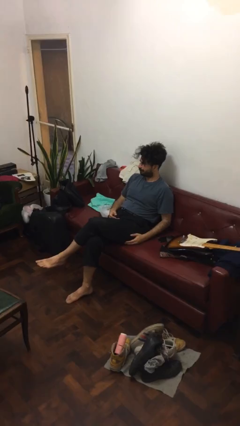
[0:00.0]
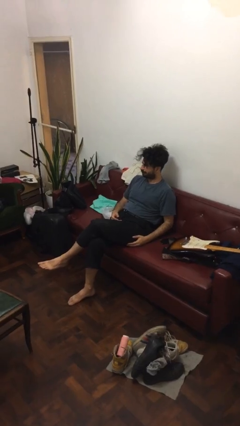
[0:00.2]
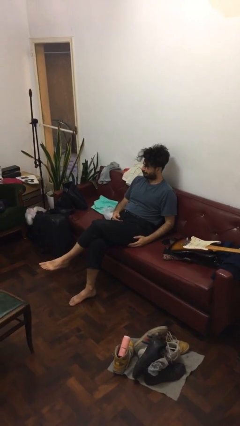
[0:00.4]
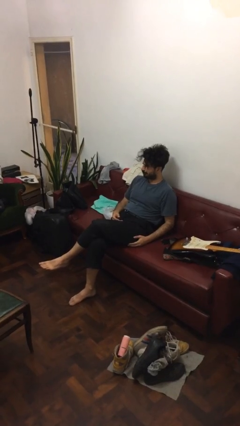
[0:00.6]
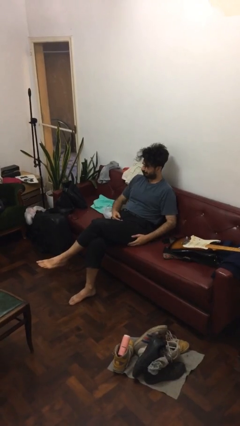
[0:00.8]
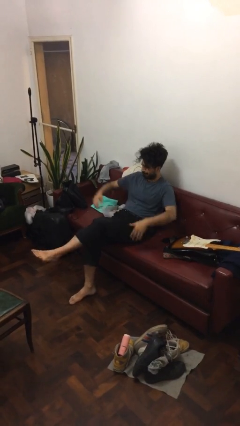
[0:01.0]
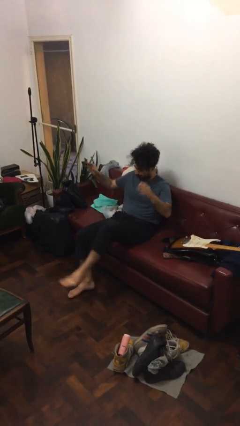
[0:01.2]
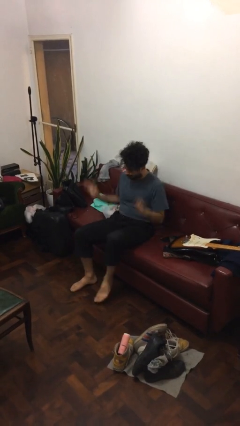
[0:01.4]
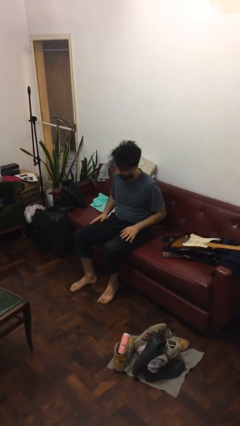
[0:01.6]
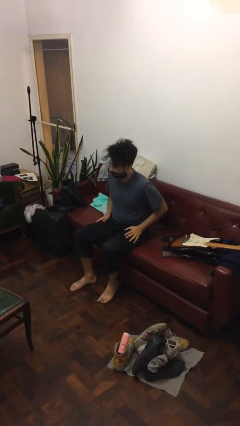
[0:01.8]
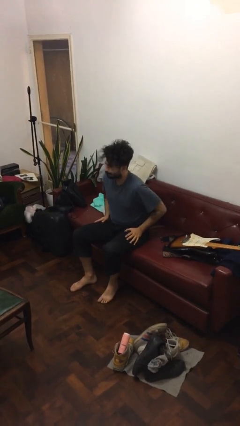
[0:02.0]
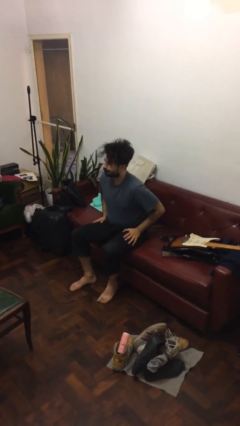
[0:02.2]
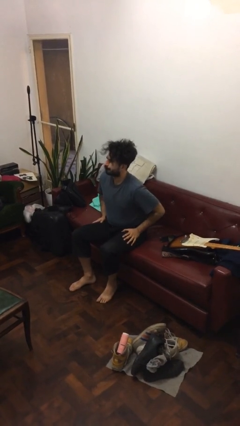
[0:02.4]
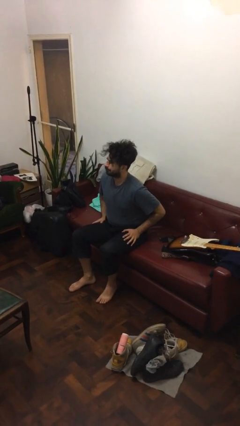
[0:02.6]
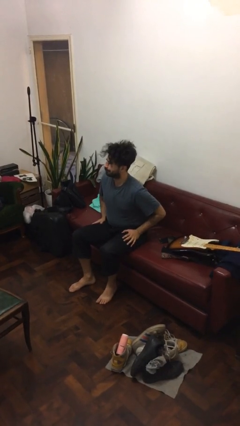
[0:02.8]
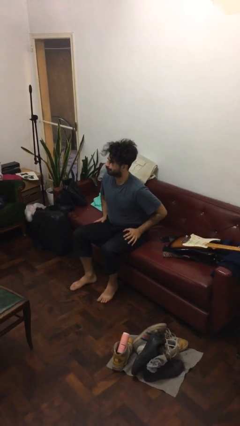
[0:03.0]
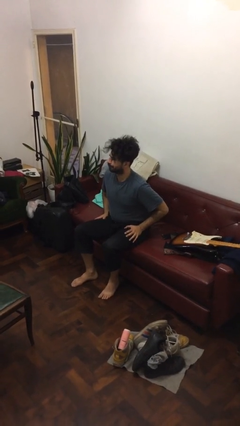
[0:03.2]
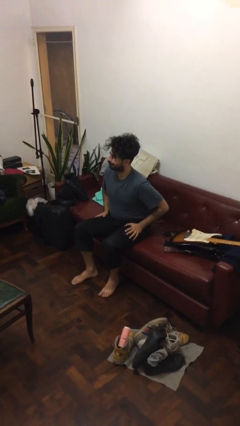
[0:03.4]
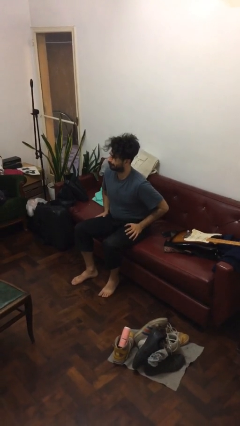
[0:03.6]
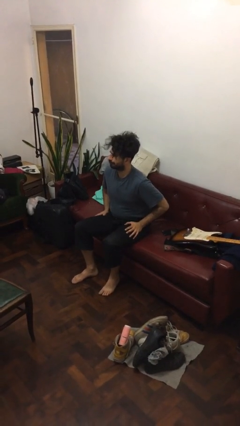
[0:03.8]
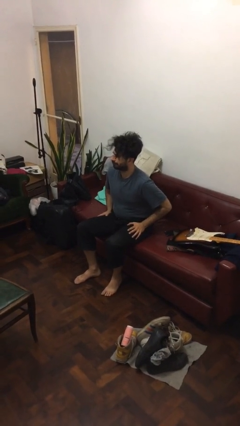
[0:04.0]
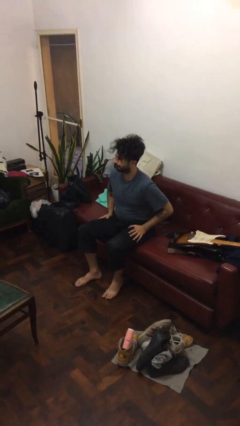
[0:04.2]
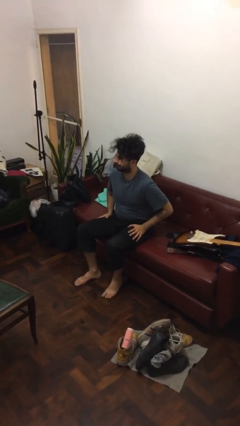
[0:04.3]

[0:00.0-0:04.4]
person slaps hands on thighs

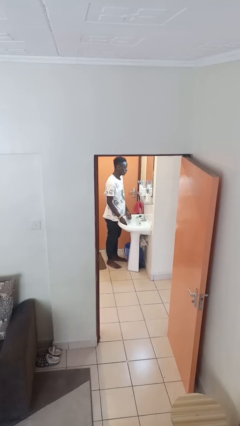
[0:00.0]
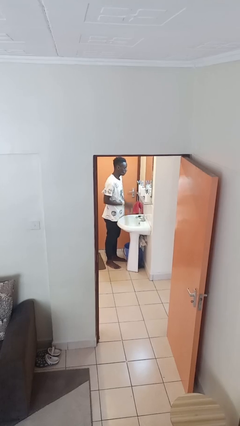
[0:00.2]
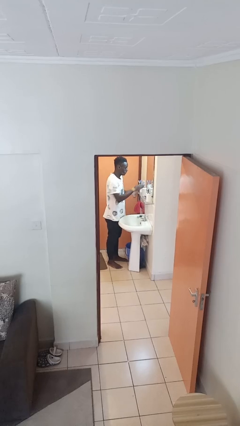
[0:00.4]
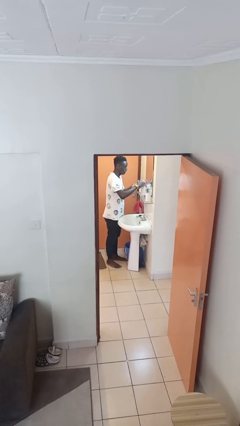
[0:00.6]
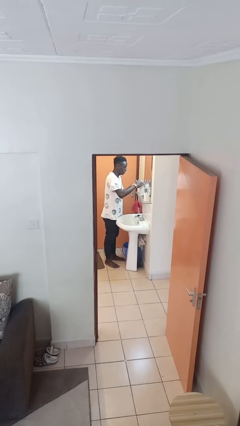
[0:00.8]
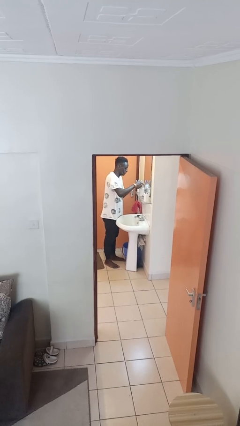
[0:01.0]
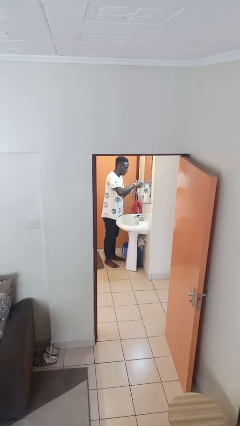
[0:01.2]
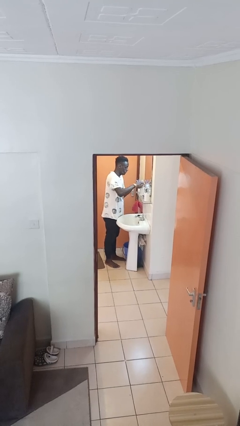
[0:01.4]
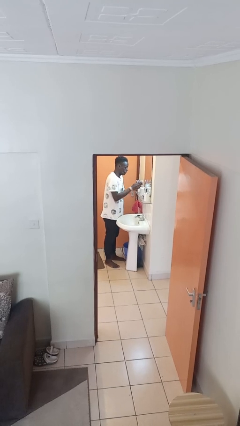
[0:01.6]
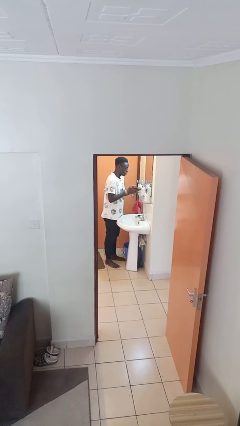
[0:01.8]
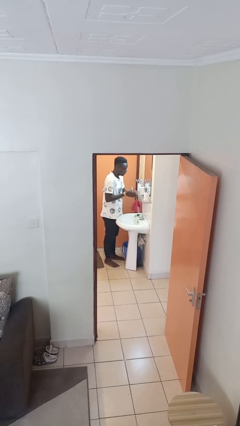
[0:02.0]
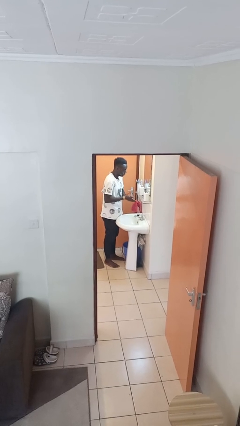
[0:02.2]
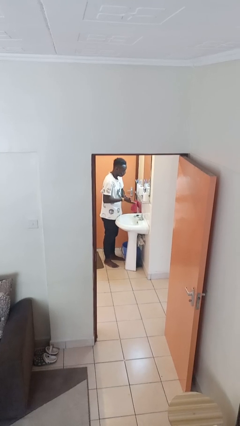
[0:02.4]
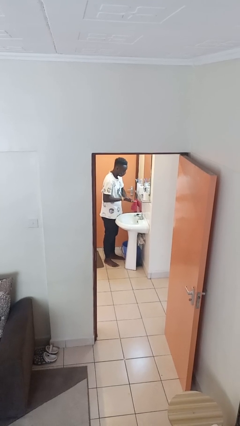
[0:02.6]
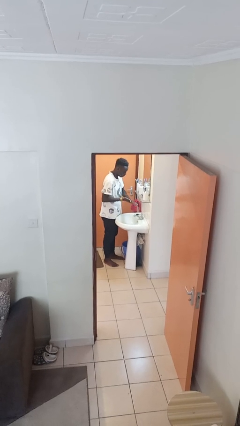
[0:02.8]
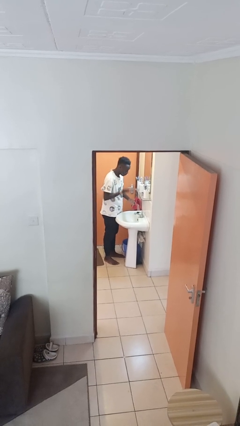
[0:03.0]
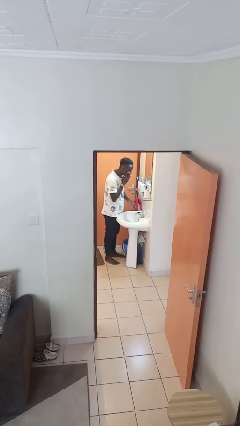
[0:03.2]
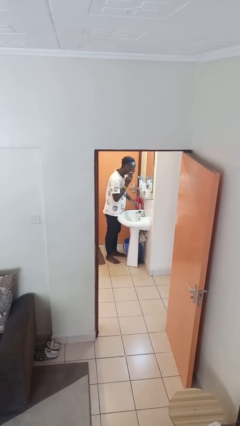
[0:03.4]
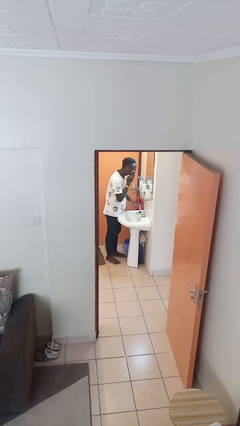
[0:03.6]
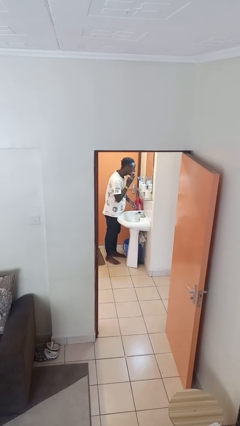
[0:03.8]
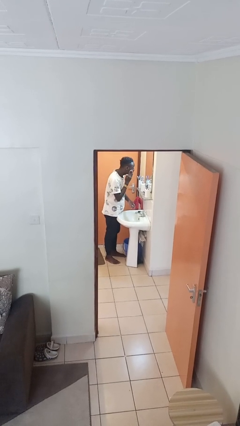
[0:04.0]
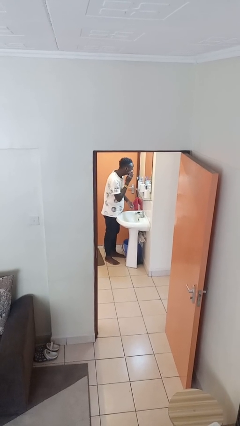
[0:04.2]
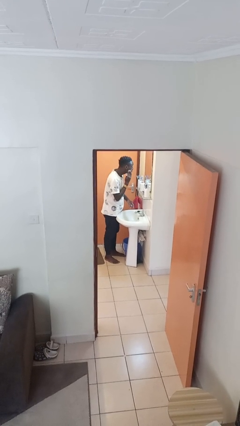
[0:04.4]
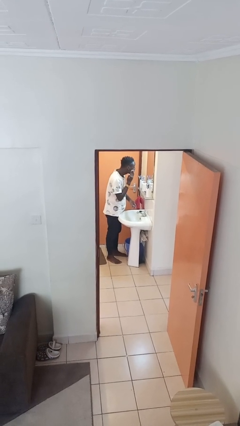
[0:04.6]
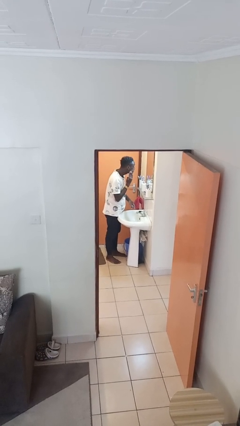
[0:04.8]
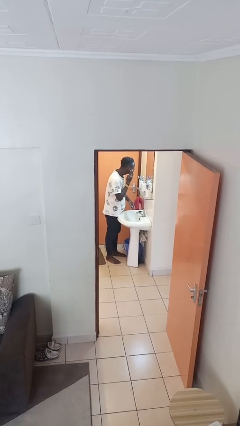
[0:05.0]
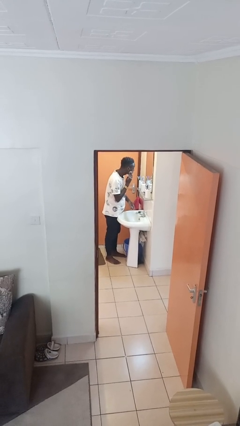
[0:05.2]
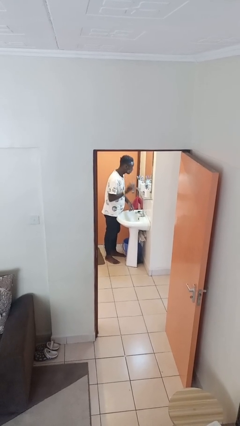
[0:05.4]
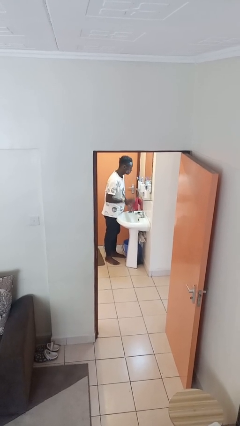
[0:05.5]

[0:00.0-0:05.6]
person applies shaving cream

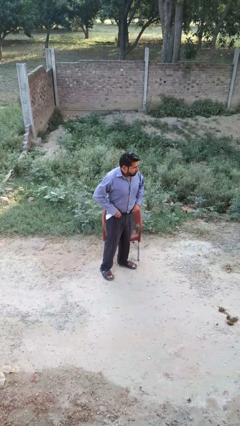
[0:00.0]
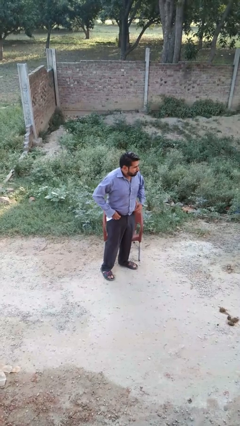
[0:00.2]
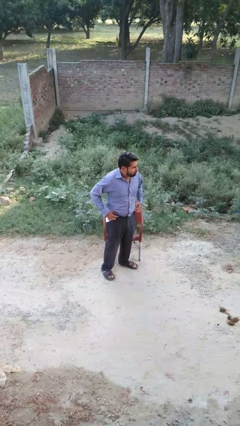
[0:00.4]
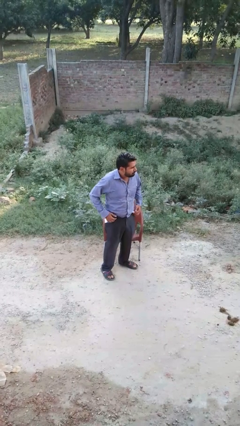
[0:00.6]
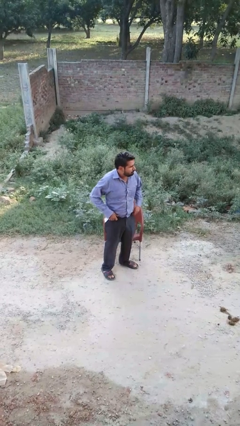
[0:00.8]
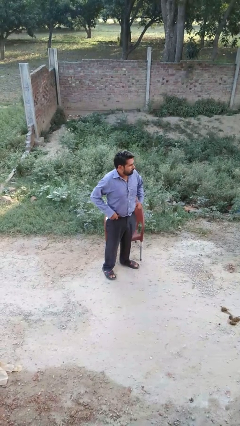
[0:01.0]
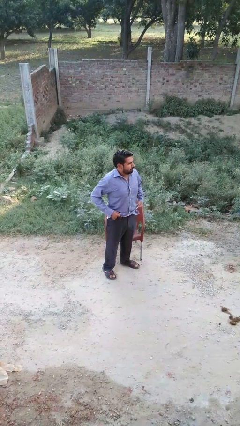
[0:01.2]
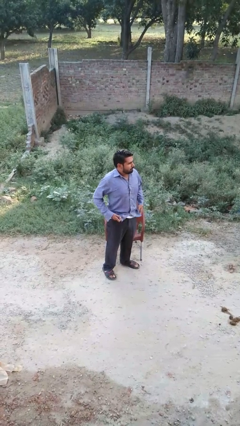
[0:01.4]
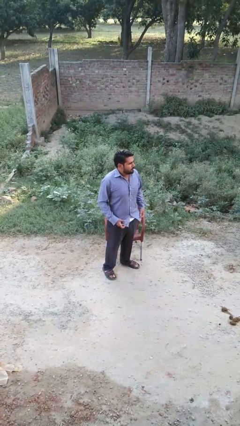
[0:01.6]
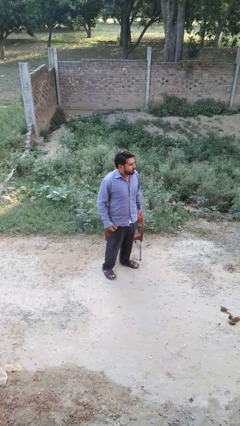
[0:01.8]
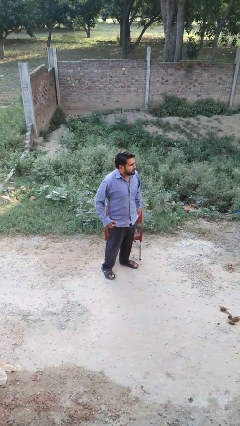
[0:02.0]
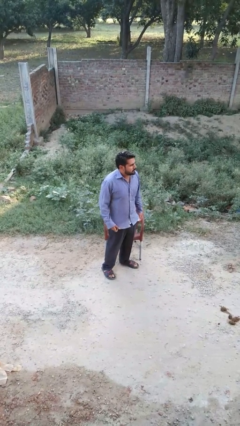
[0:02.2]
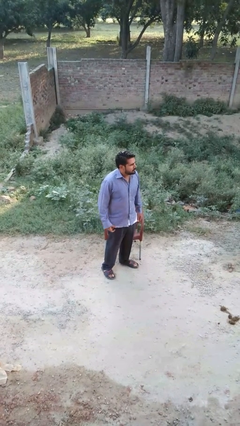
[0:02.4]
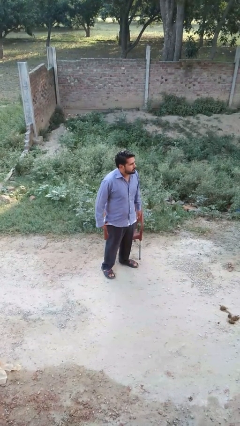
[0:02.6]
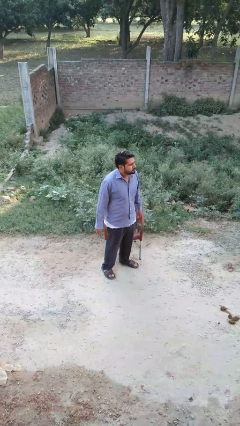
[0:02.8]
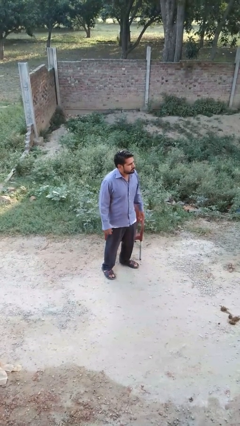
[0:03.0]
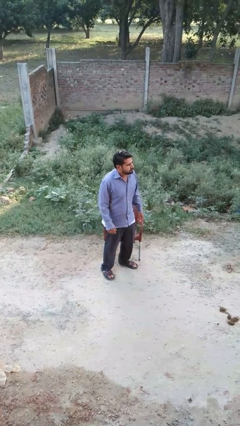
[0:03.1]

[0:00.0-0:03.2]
person untucks shirt

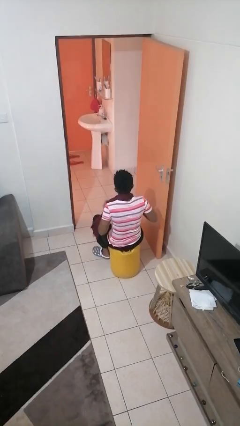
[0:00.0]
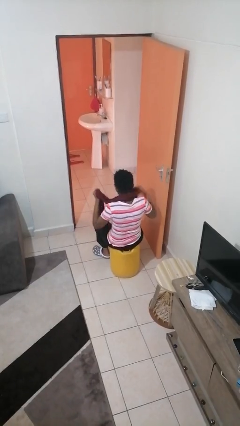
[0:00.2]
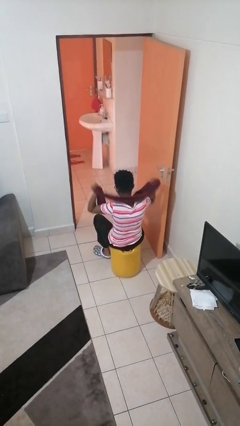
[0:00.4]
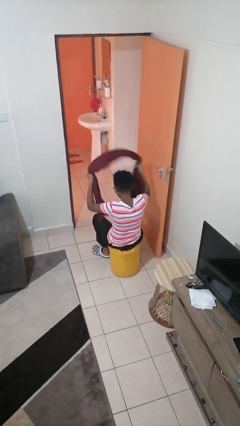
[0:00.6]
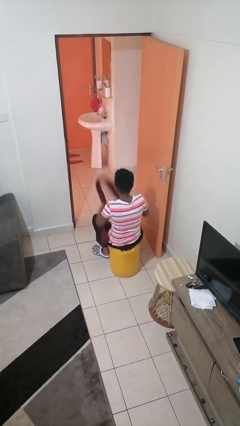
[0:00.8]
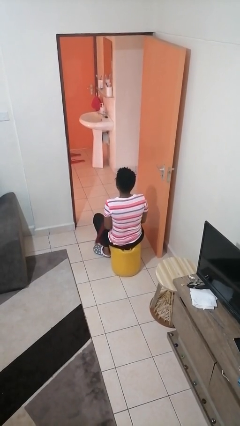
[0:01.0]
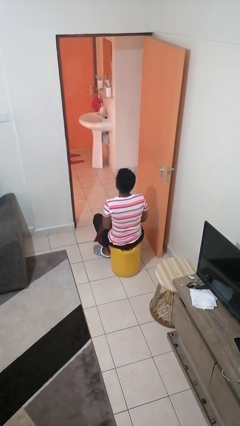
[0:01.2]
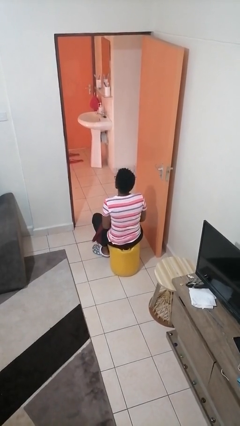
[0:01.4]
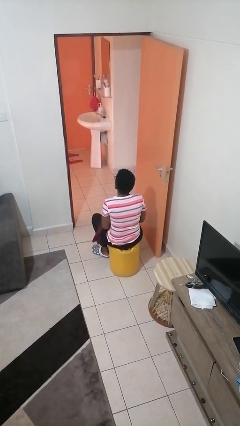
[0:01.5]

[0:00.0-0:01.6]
person takes off scarf

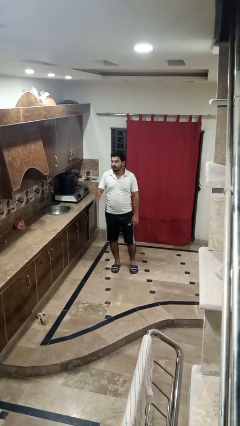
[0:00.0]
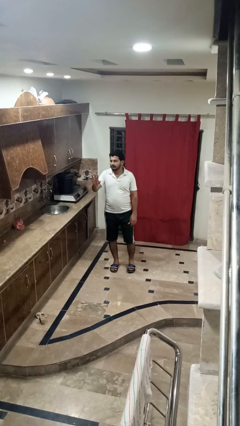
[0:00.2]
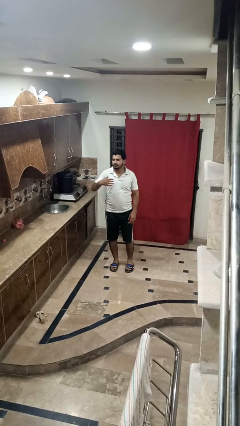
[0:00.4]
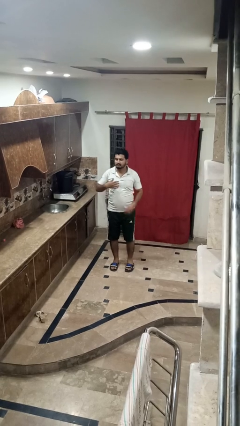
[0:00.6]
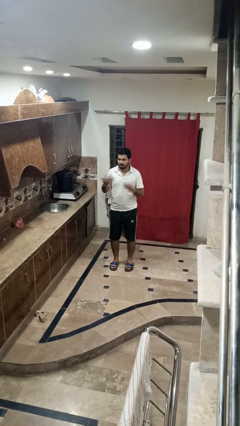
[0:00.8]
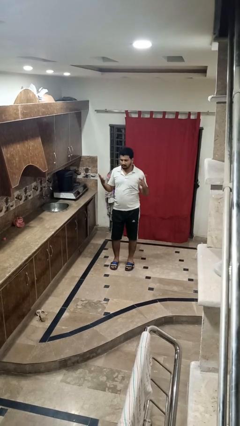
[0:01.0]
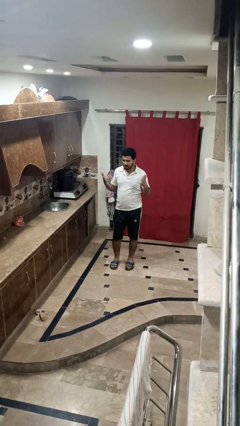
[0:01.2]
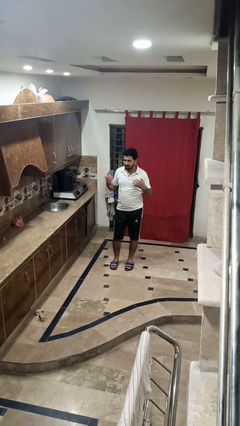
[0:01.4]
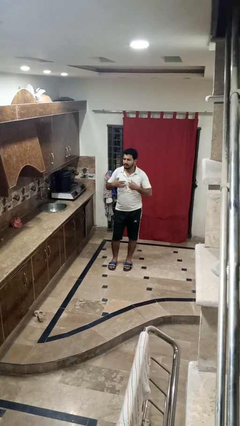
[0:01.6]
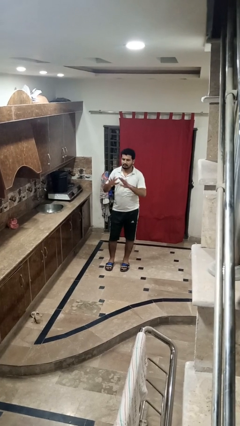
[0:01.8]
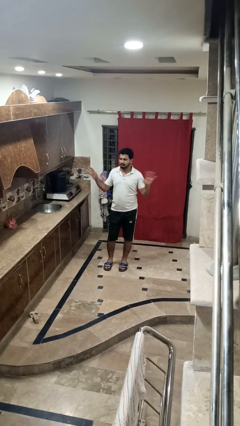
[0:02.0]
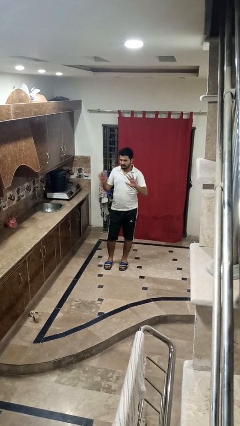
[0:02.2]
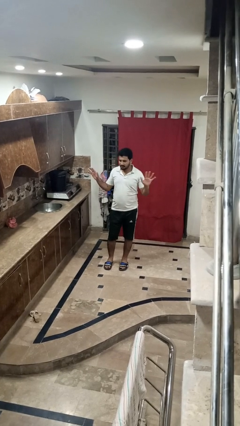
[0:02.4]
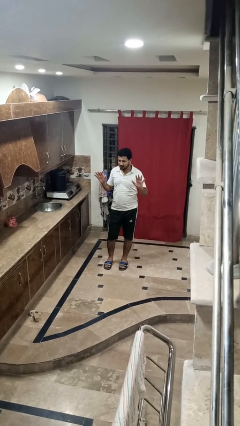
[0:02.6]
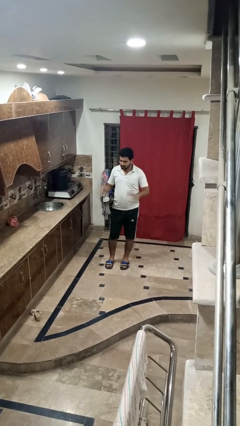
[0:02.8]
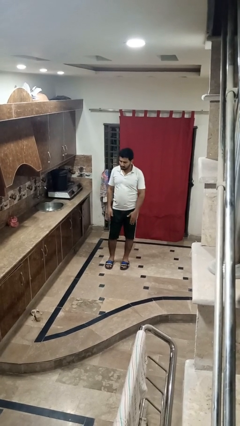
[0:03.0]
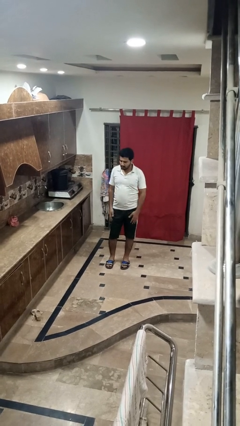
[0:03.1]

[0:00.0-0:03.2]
person shrugs
